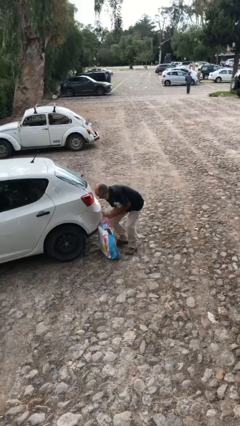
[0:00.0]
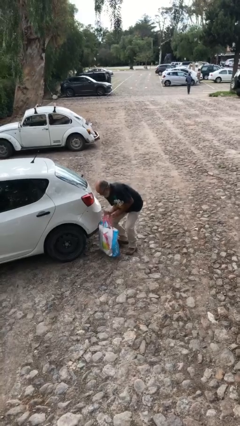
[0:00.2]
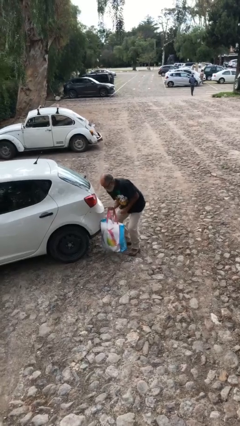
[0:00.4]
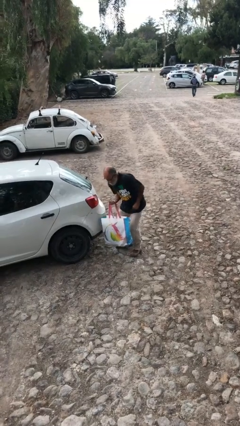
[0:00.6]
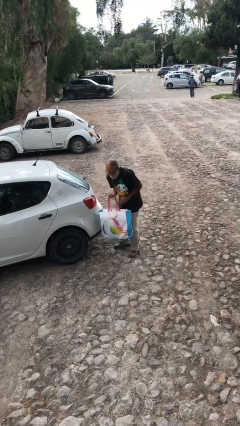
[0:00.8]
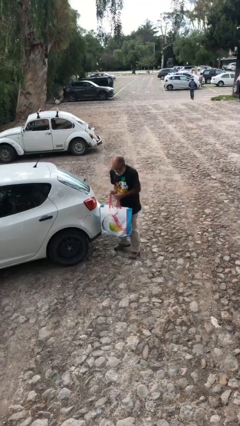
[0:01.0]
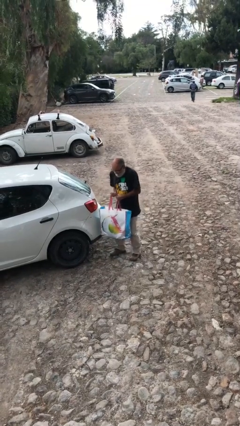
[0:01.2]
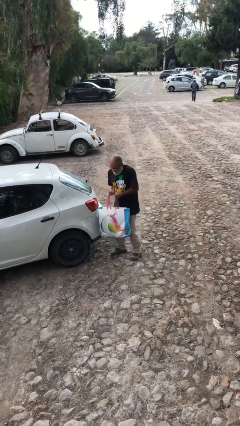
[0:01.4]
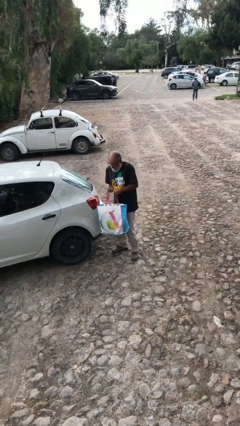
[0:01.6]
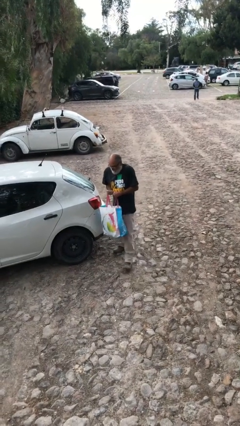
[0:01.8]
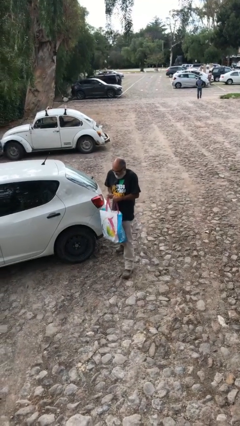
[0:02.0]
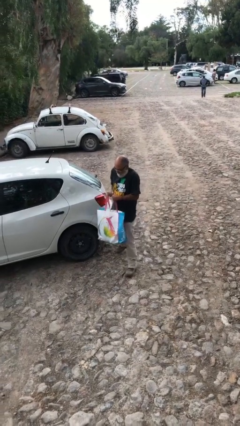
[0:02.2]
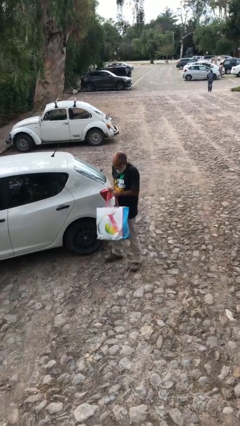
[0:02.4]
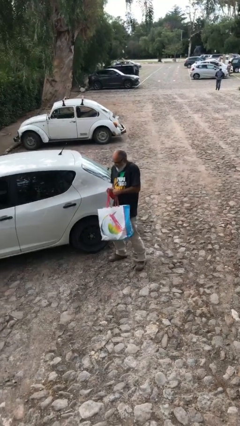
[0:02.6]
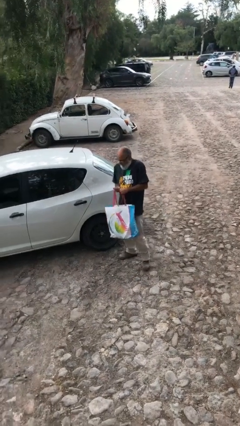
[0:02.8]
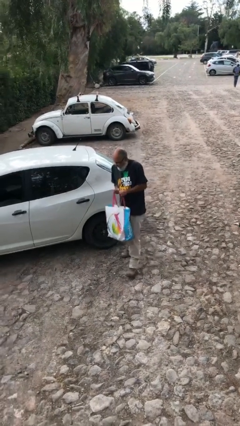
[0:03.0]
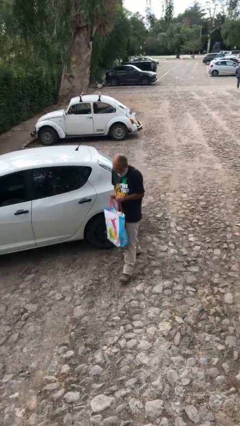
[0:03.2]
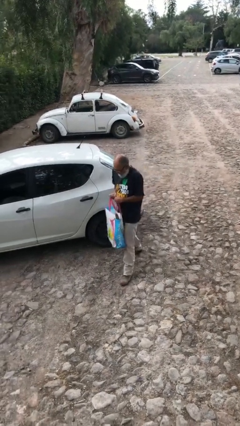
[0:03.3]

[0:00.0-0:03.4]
person carries heavy object

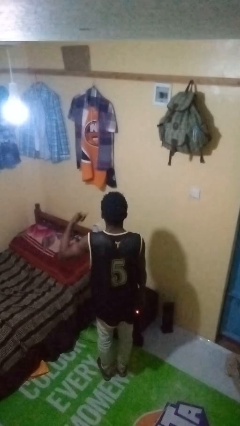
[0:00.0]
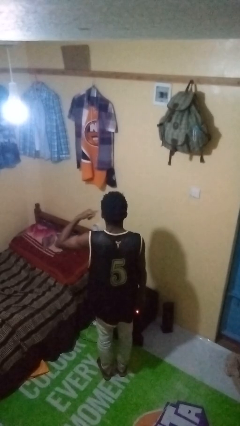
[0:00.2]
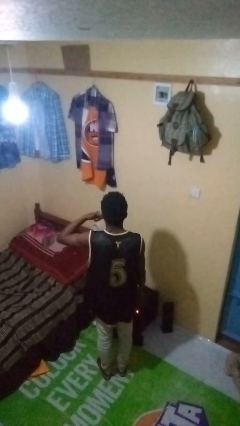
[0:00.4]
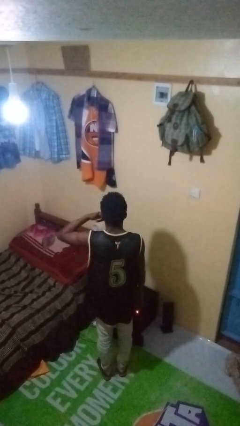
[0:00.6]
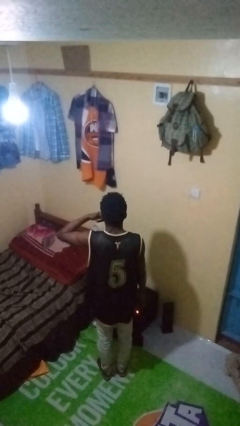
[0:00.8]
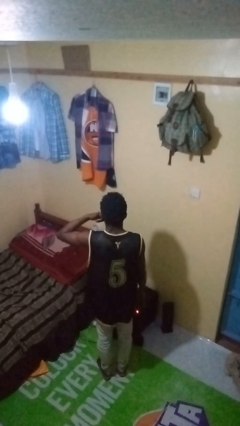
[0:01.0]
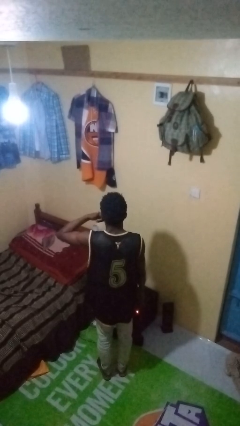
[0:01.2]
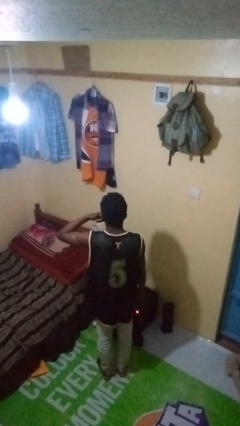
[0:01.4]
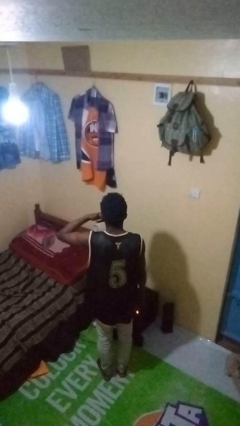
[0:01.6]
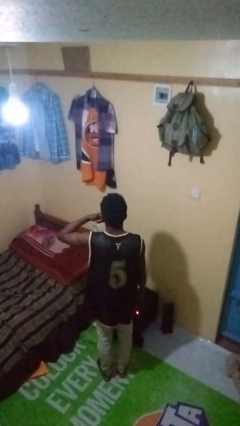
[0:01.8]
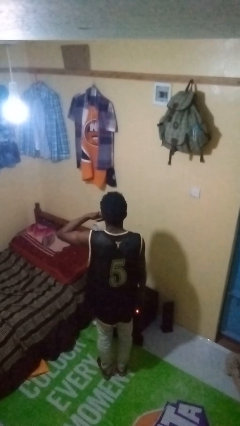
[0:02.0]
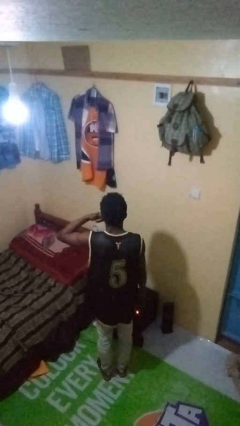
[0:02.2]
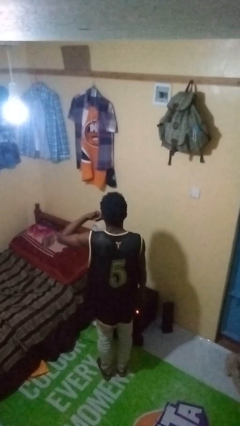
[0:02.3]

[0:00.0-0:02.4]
person gestures call me

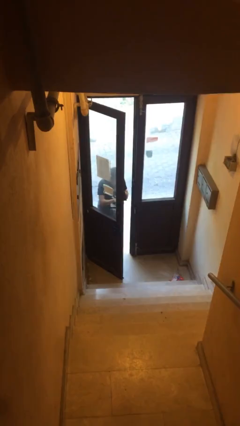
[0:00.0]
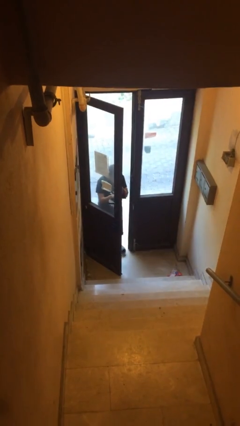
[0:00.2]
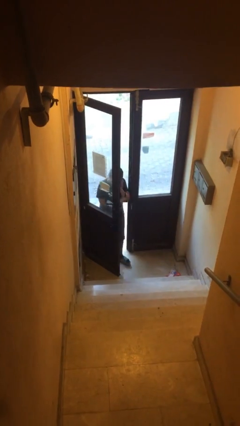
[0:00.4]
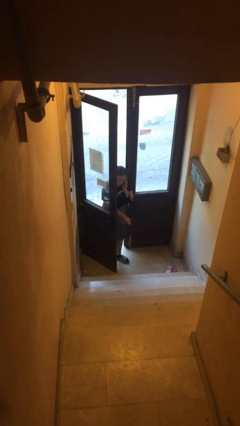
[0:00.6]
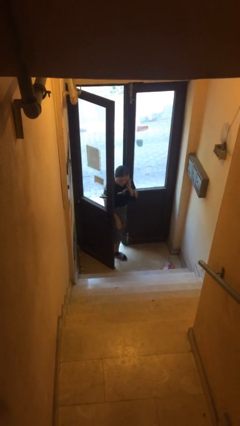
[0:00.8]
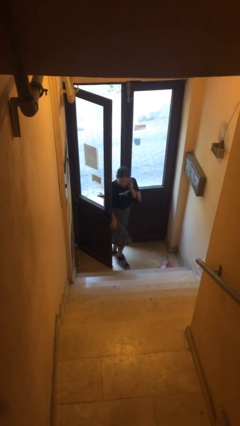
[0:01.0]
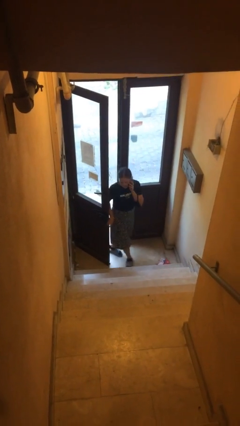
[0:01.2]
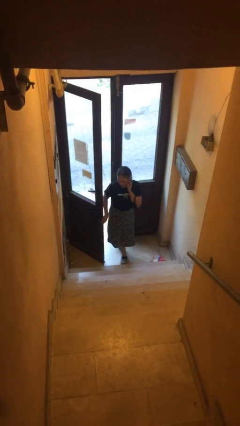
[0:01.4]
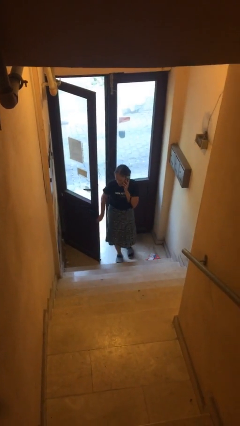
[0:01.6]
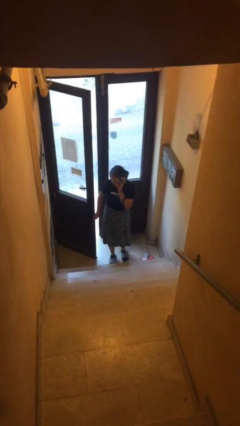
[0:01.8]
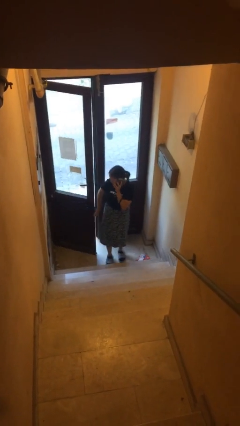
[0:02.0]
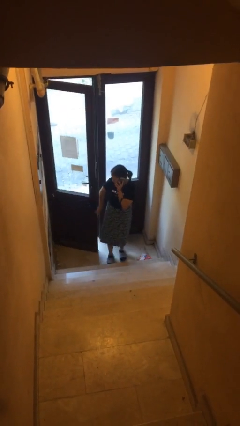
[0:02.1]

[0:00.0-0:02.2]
person enters scene through structure

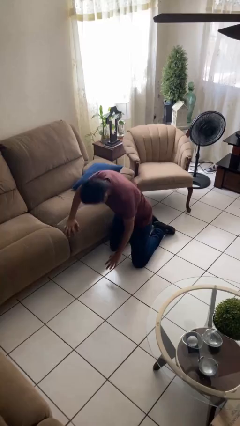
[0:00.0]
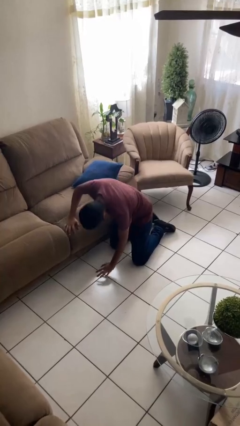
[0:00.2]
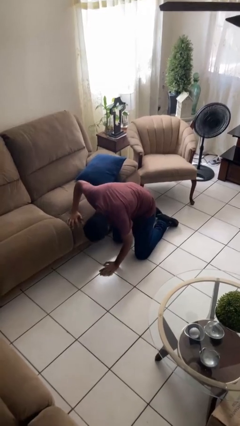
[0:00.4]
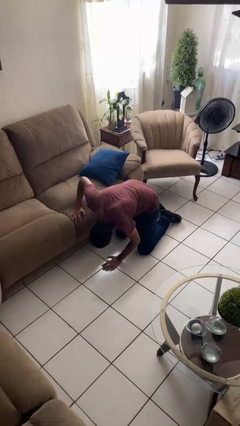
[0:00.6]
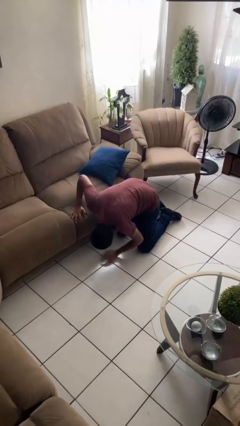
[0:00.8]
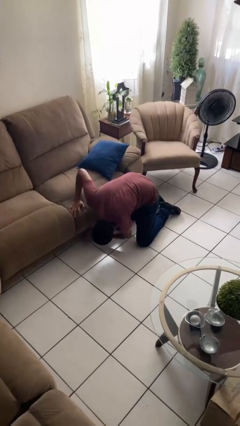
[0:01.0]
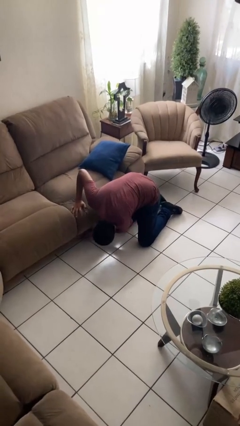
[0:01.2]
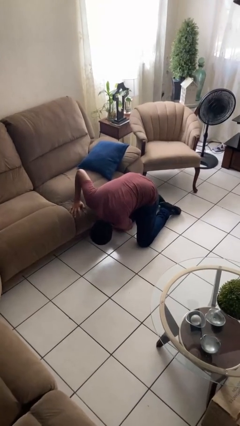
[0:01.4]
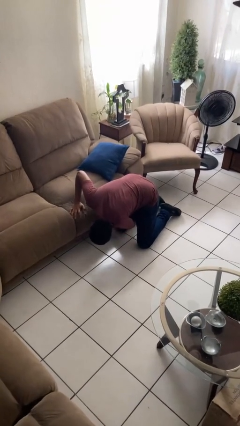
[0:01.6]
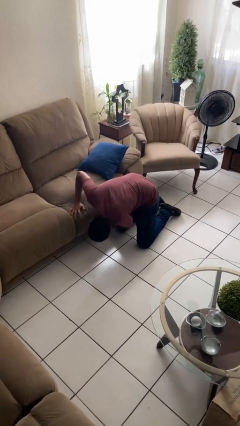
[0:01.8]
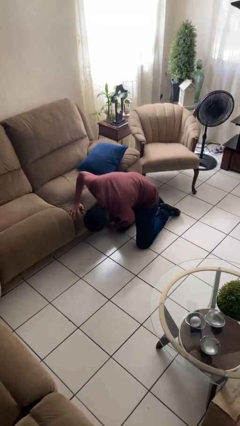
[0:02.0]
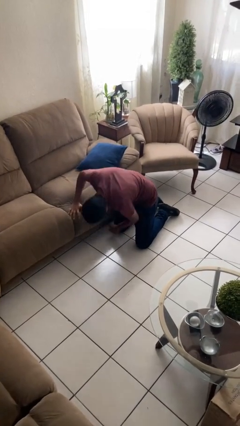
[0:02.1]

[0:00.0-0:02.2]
person searches under couch

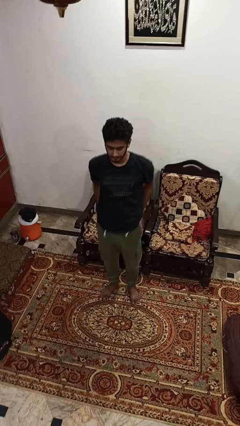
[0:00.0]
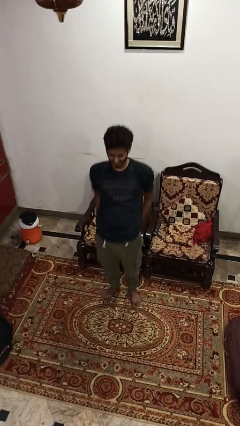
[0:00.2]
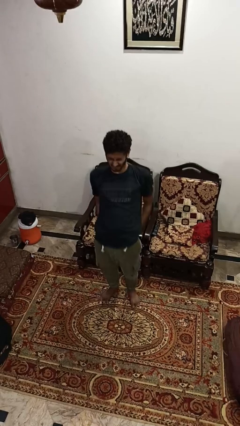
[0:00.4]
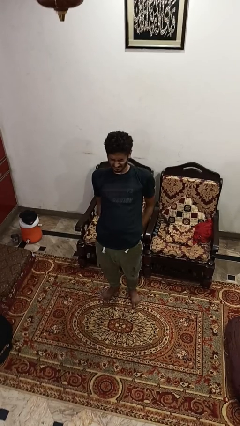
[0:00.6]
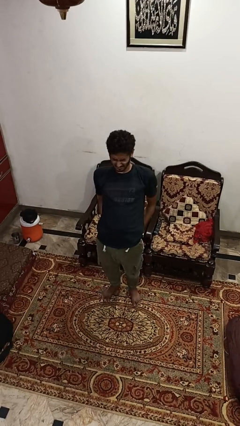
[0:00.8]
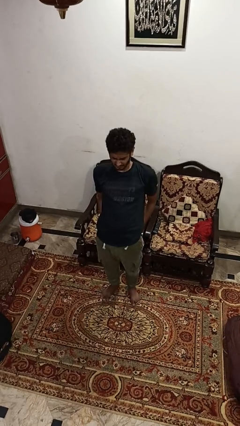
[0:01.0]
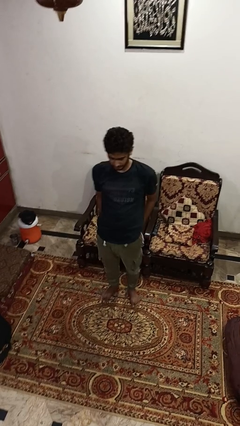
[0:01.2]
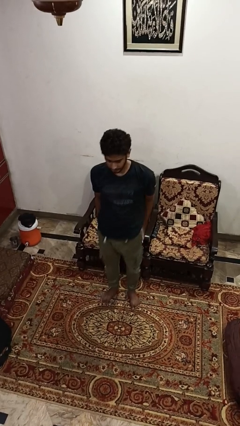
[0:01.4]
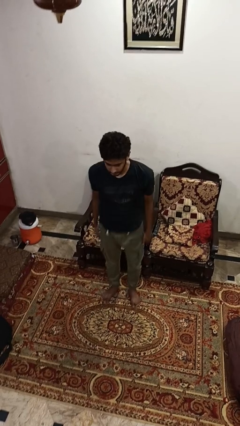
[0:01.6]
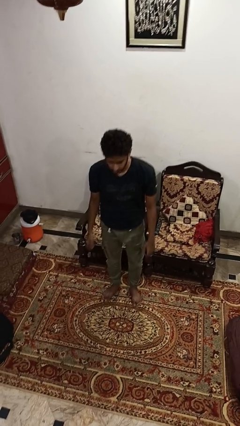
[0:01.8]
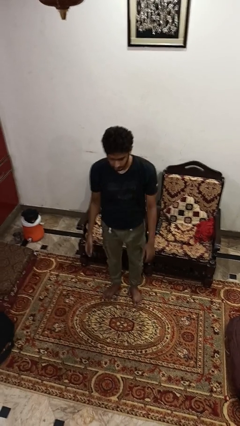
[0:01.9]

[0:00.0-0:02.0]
person stretches back

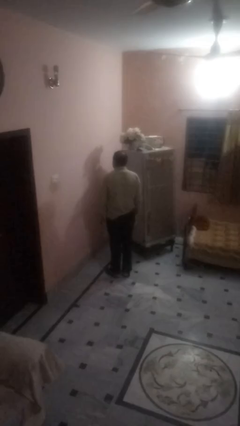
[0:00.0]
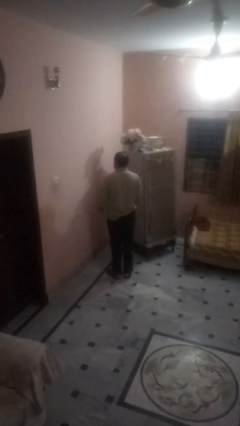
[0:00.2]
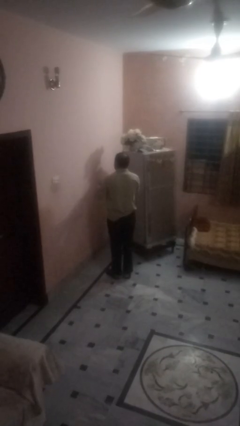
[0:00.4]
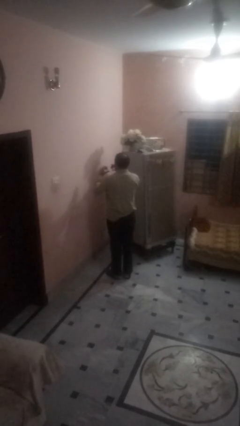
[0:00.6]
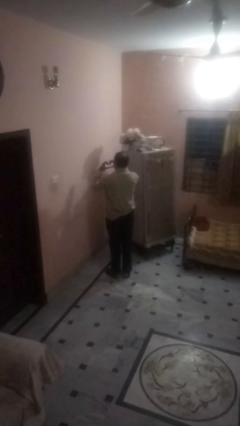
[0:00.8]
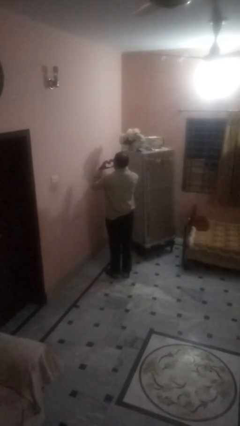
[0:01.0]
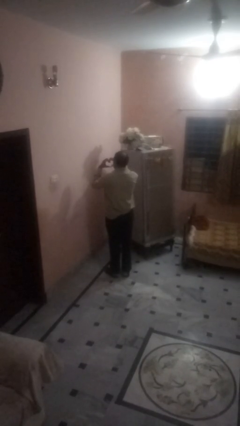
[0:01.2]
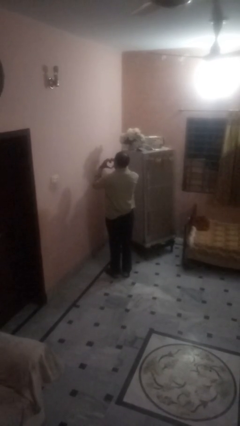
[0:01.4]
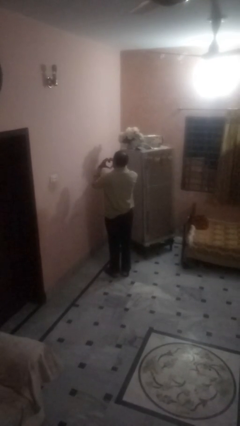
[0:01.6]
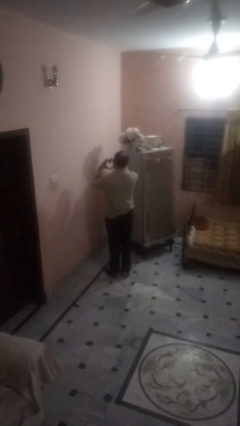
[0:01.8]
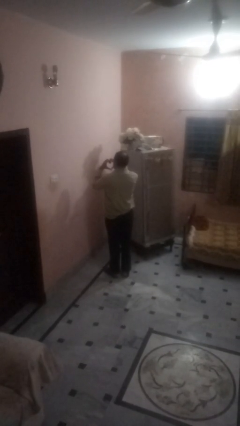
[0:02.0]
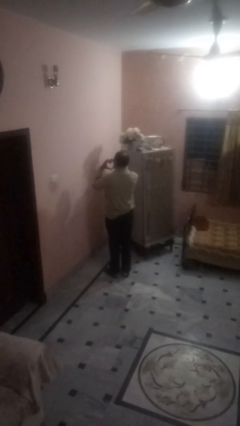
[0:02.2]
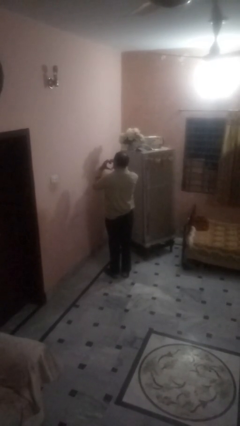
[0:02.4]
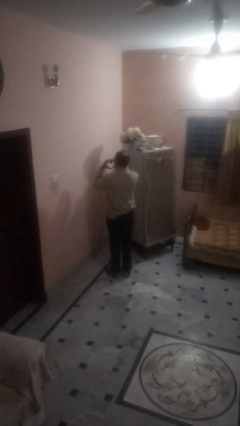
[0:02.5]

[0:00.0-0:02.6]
person gestures heart

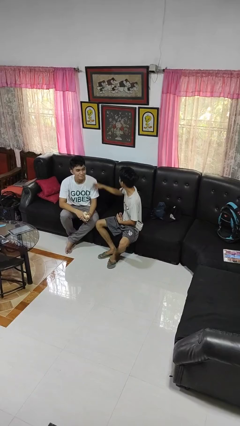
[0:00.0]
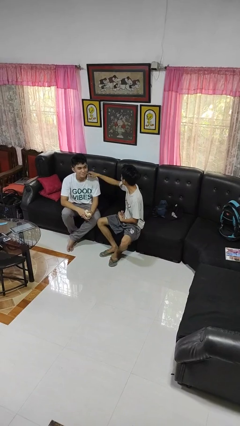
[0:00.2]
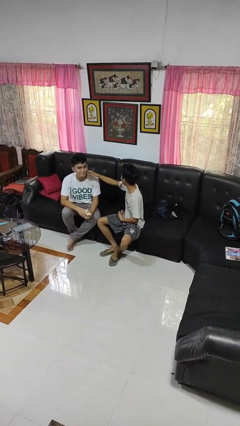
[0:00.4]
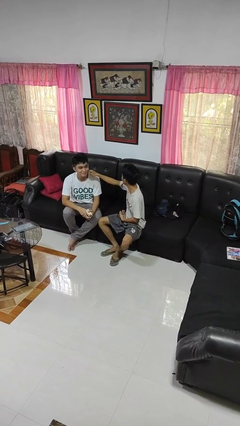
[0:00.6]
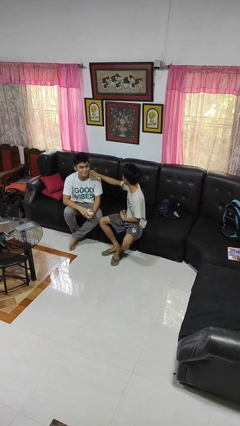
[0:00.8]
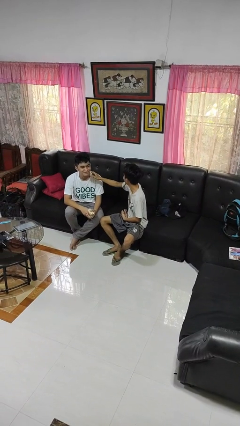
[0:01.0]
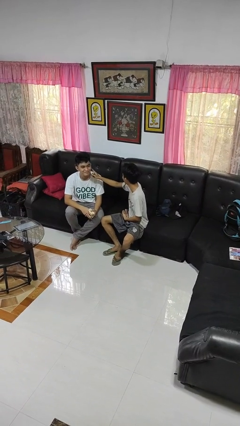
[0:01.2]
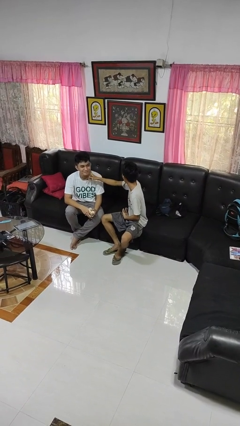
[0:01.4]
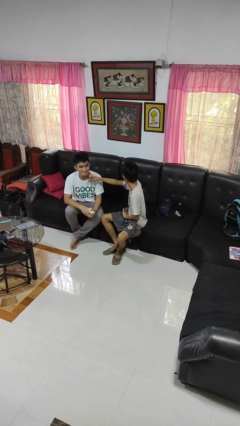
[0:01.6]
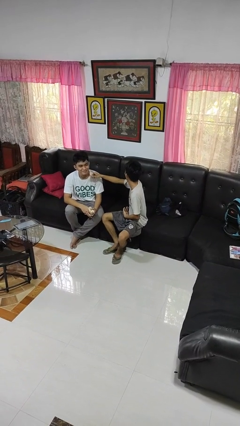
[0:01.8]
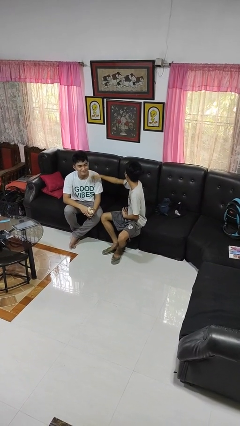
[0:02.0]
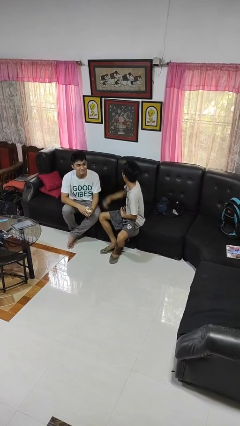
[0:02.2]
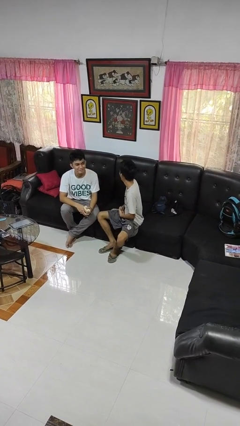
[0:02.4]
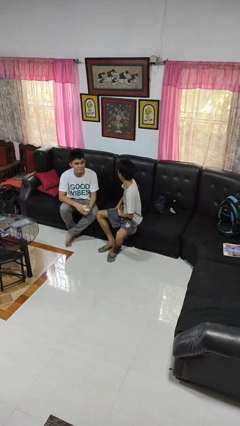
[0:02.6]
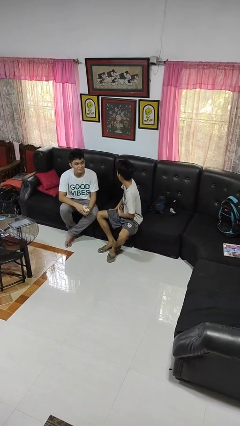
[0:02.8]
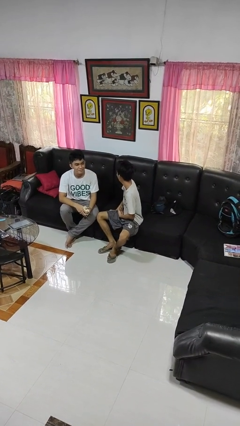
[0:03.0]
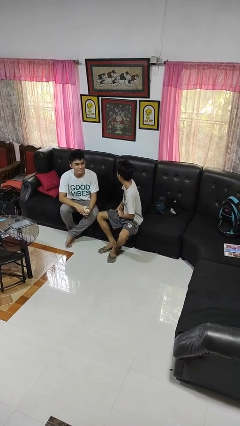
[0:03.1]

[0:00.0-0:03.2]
person touches face of person
